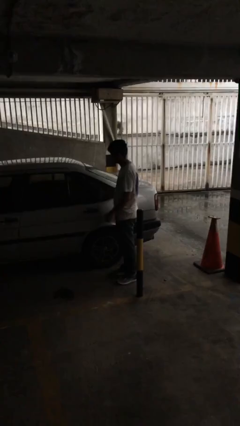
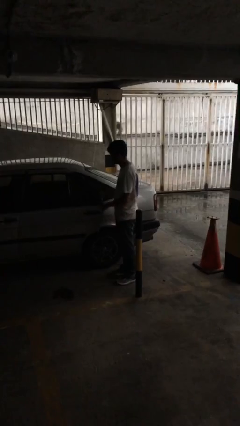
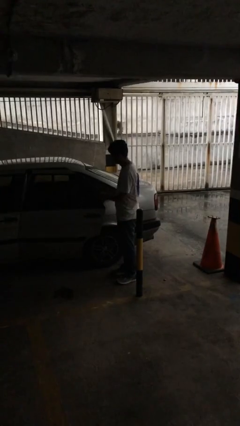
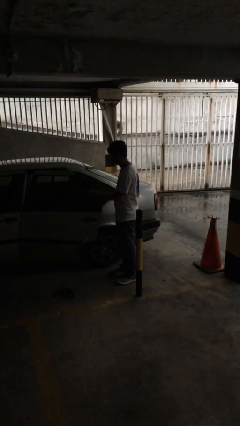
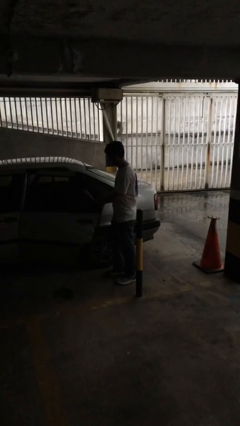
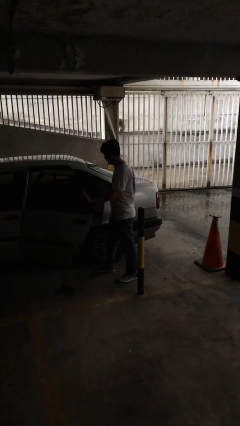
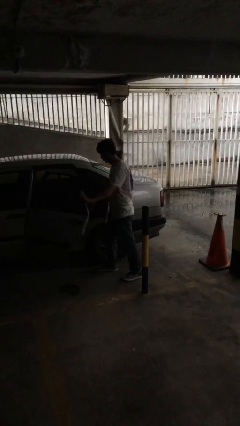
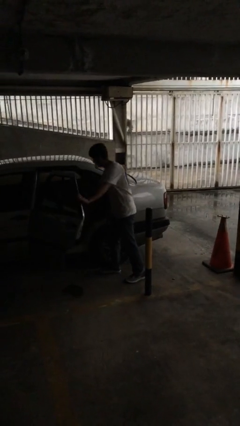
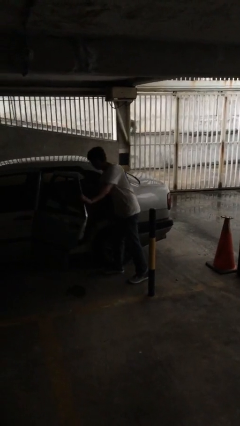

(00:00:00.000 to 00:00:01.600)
person opens car door

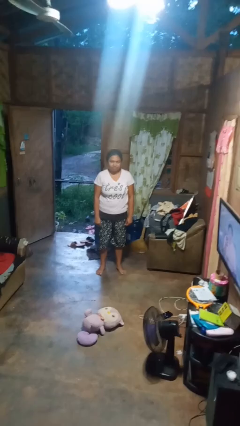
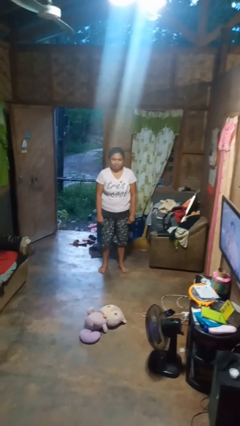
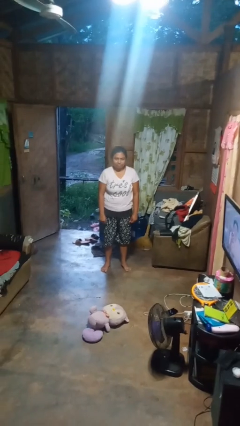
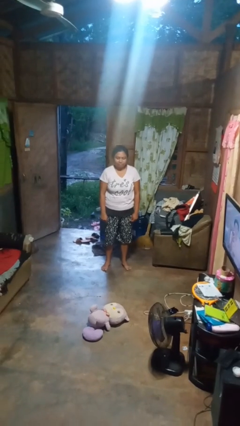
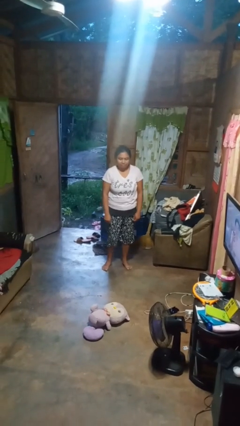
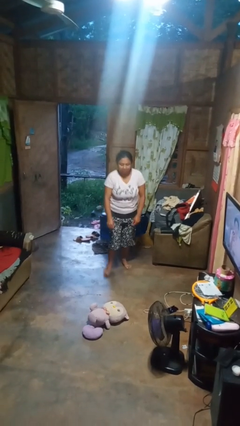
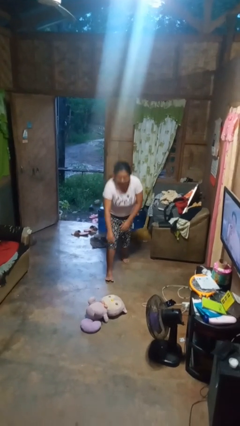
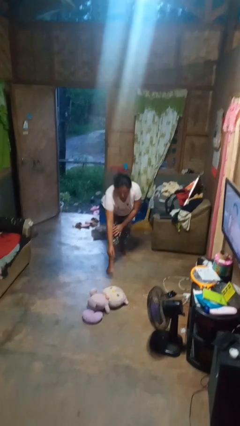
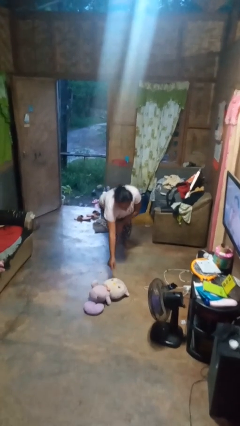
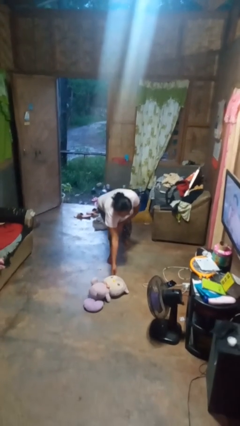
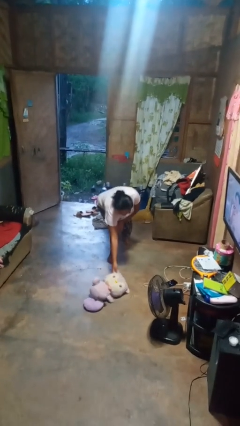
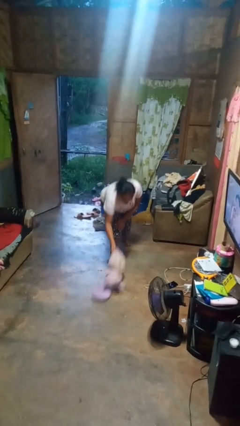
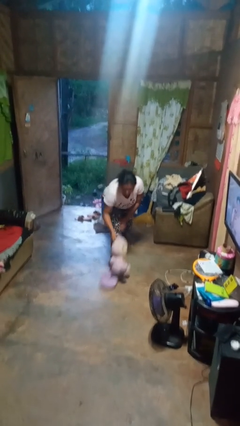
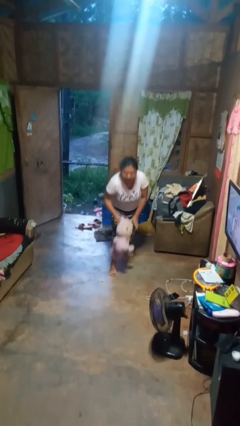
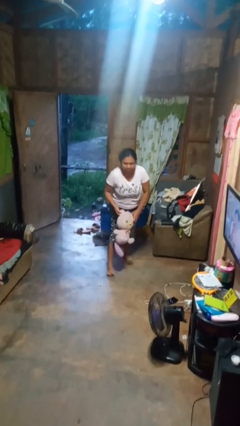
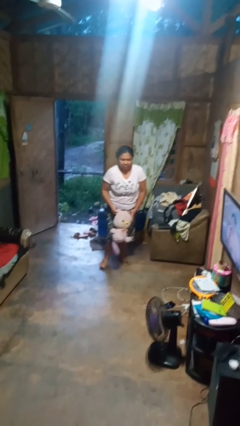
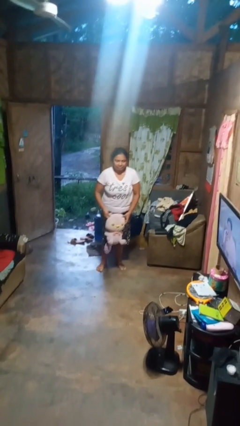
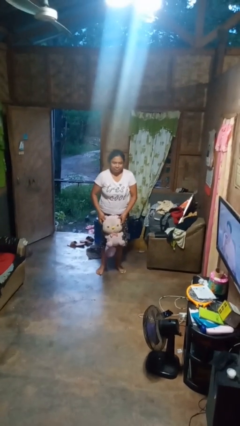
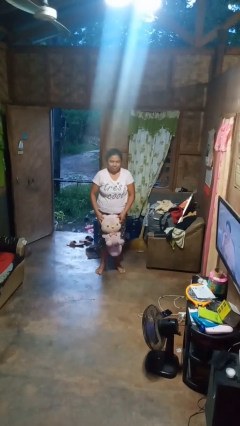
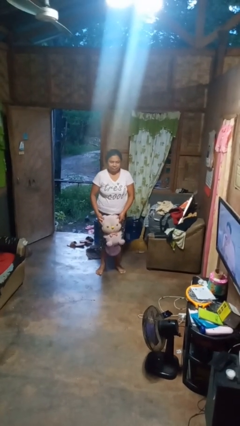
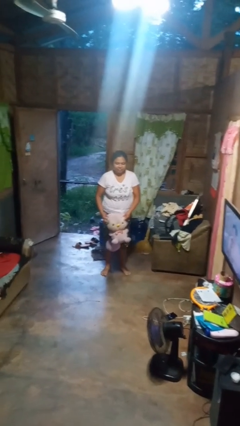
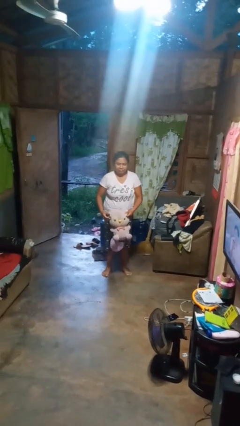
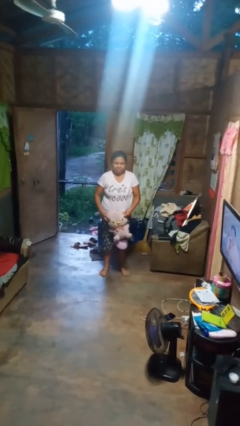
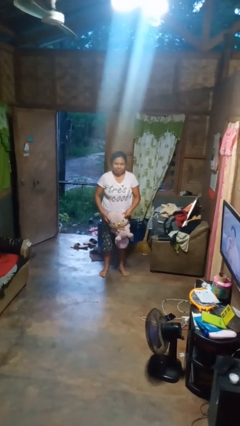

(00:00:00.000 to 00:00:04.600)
person picks up object from floor

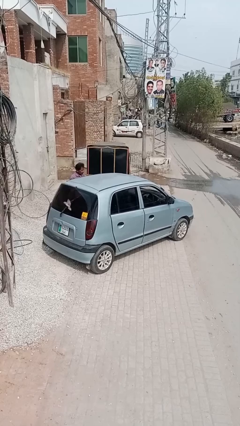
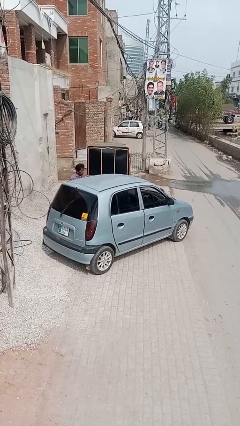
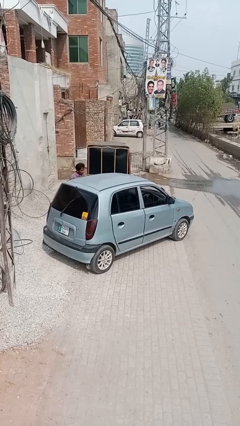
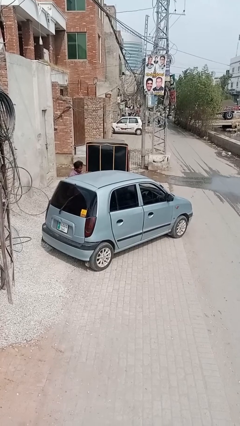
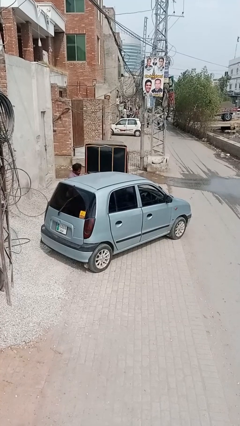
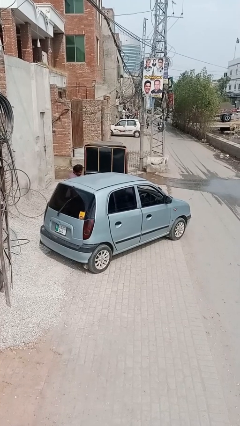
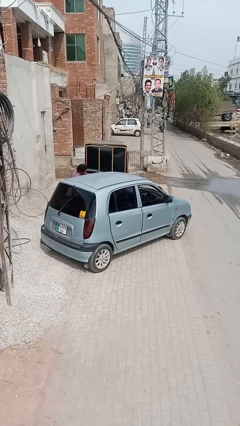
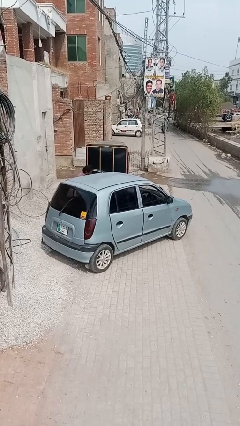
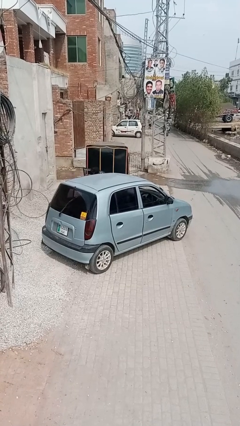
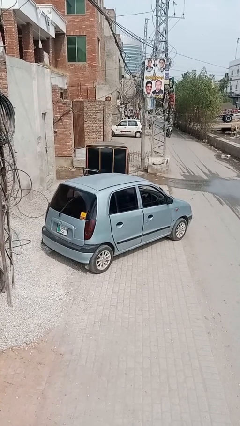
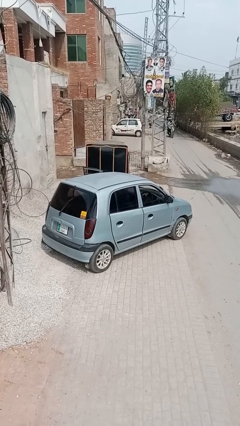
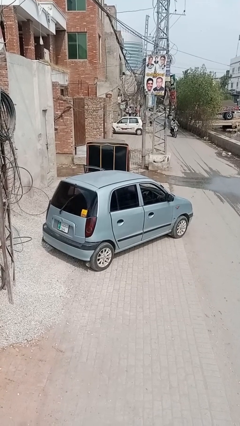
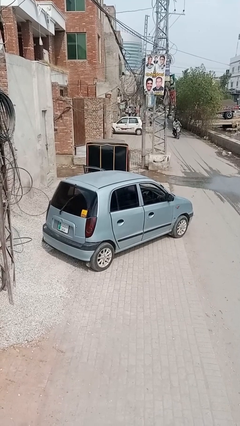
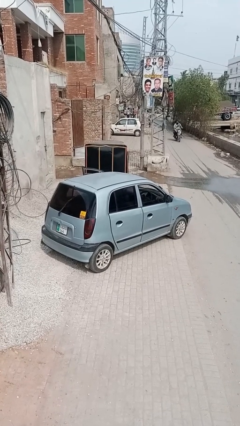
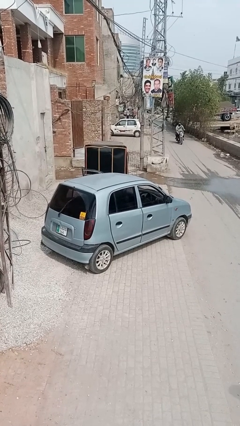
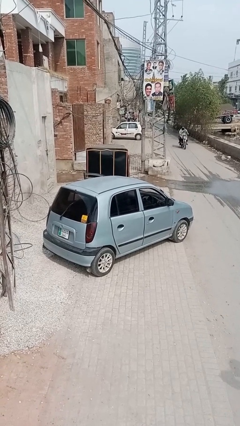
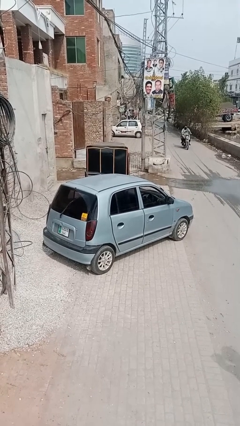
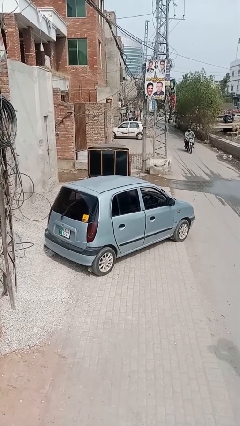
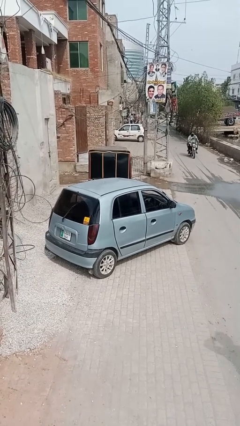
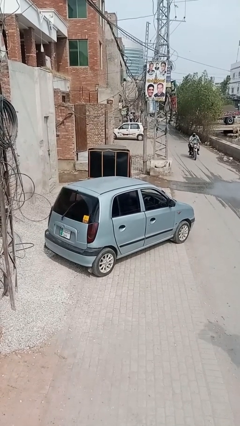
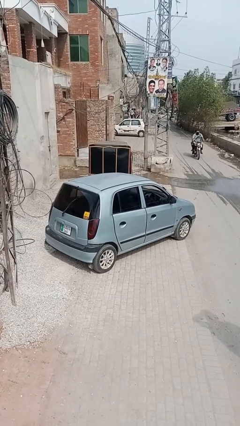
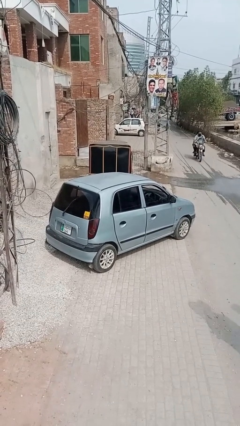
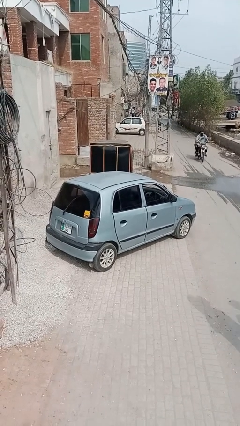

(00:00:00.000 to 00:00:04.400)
car picks up person

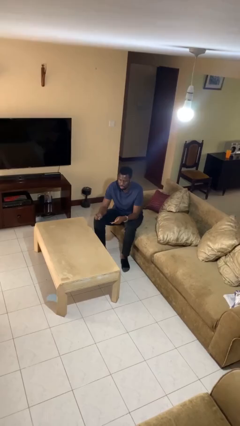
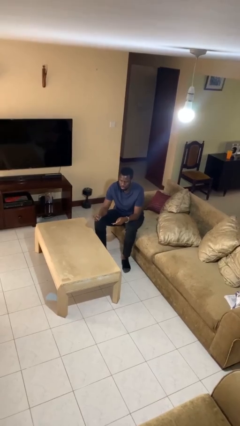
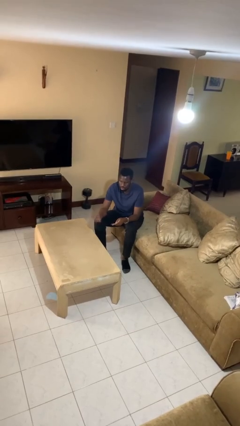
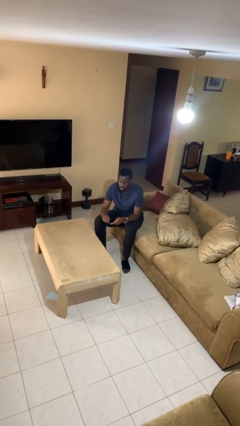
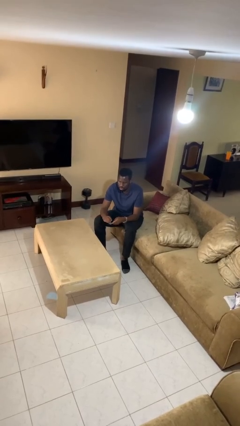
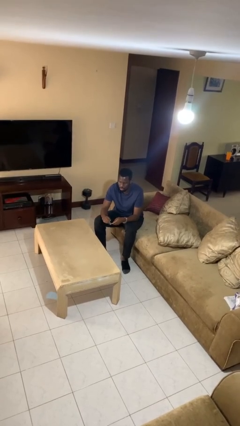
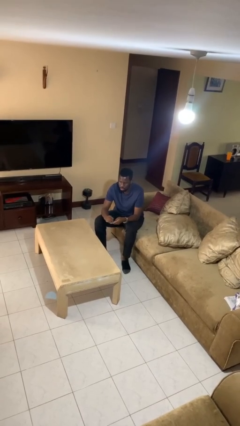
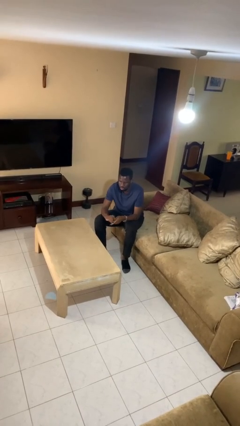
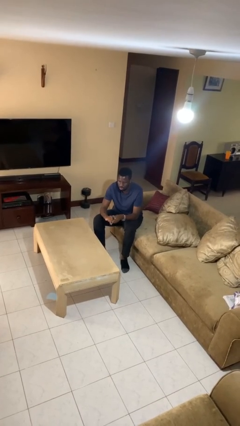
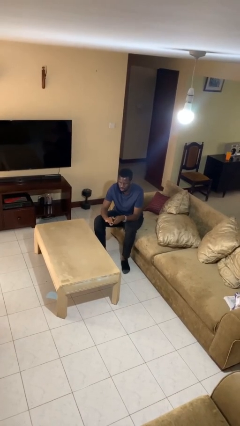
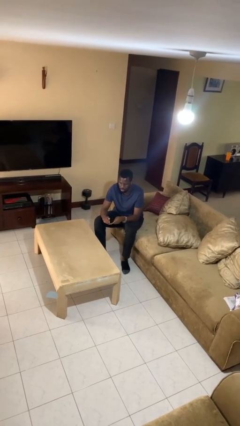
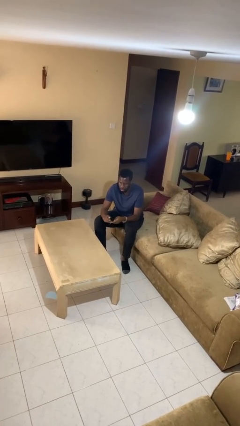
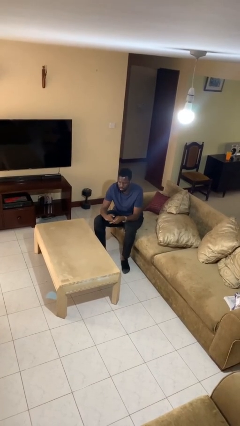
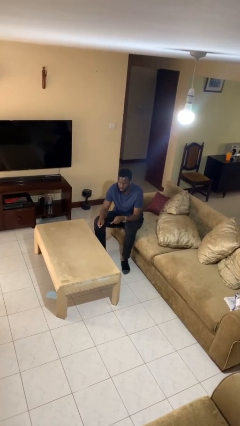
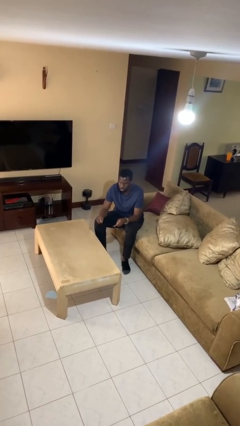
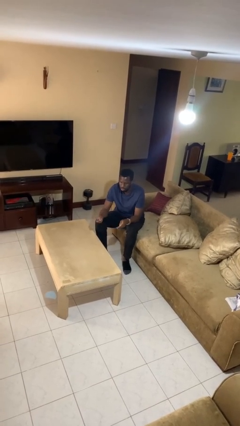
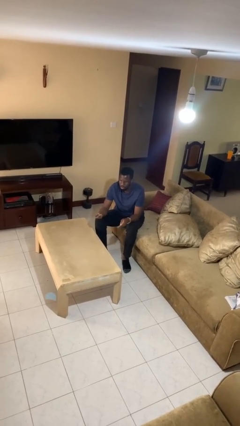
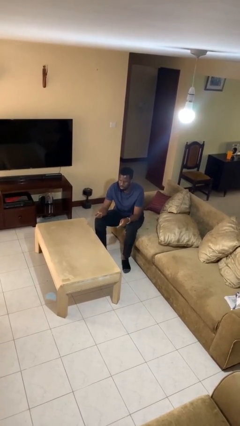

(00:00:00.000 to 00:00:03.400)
person files fingernails

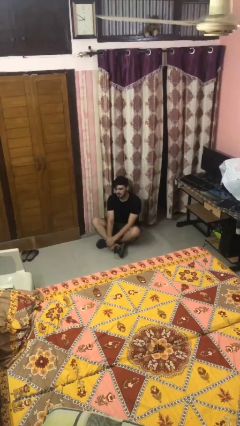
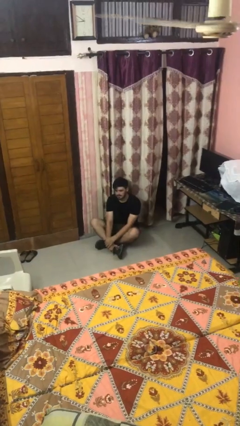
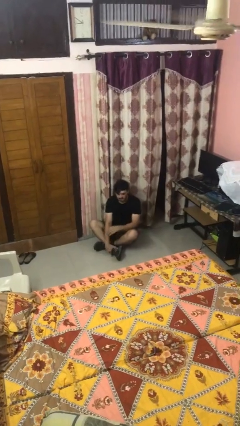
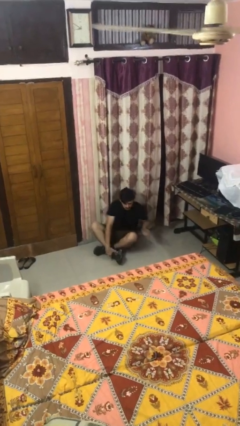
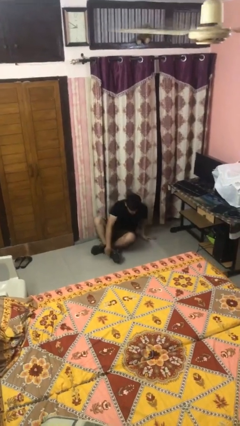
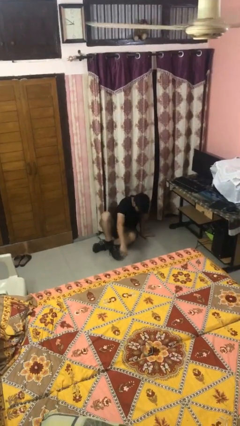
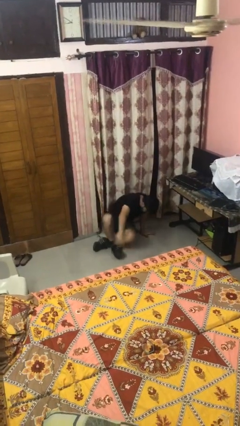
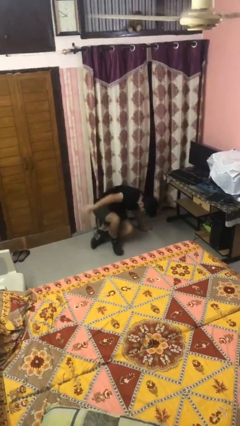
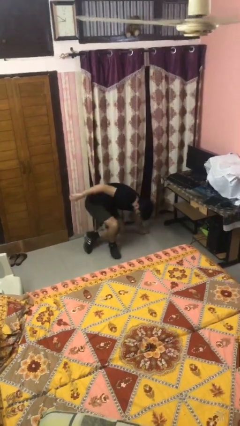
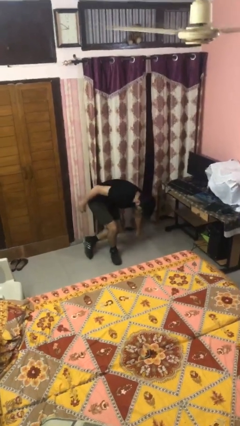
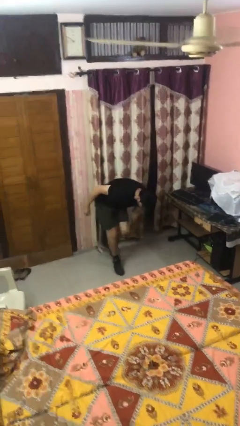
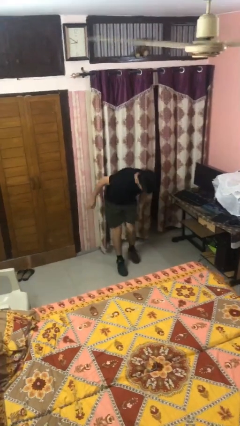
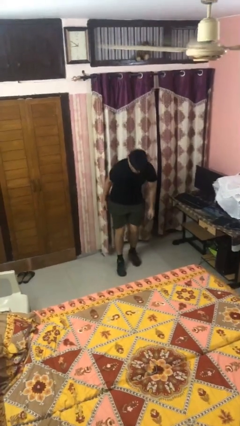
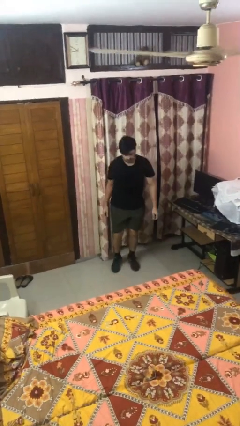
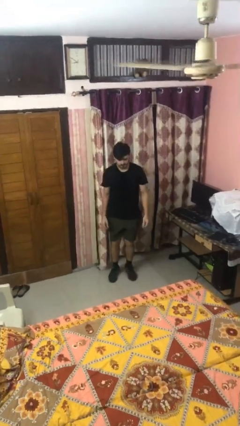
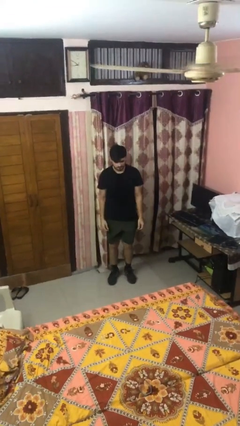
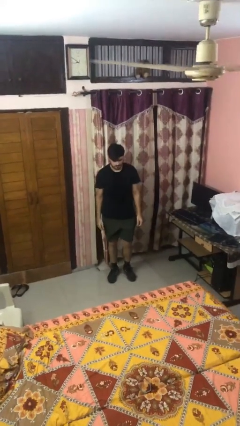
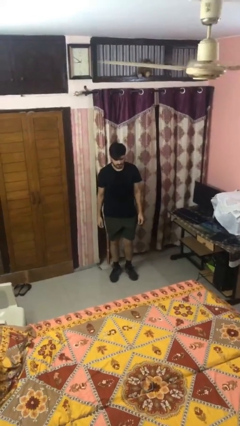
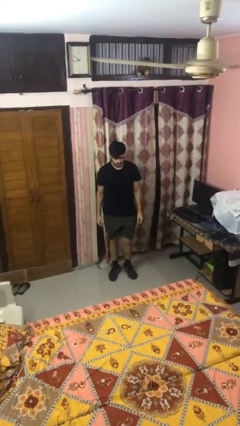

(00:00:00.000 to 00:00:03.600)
person stands up from floor
